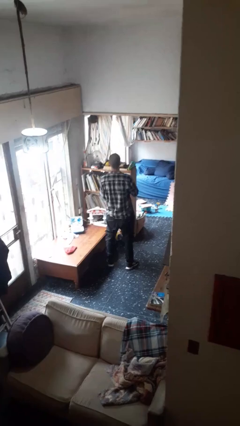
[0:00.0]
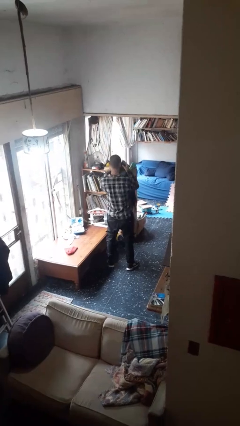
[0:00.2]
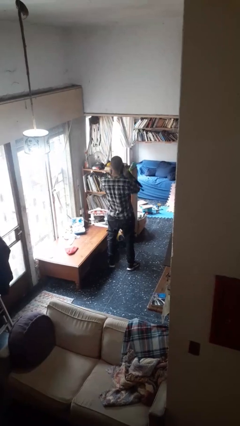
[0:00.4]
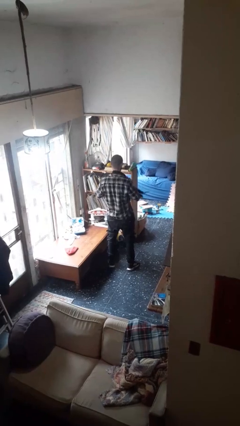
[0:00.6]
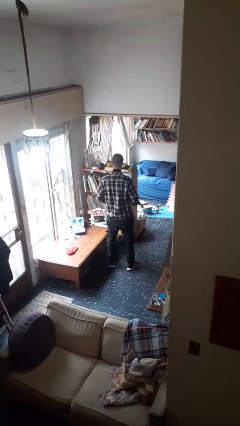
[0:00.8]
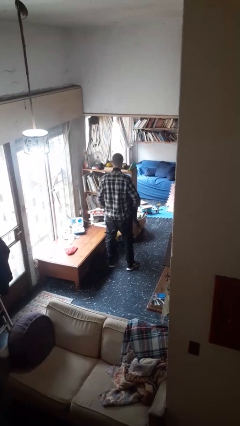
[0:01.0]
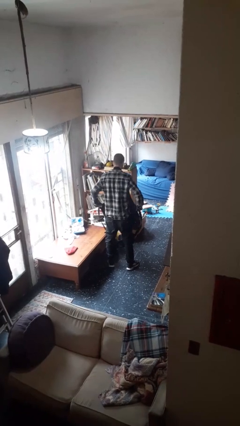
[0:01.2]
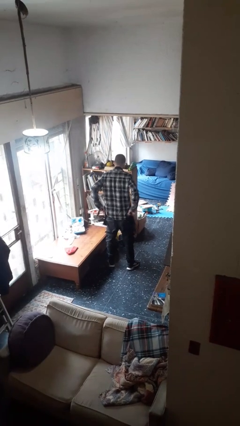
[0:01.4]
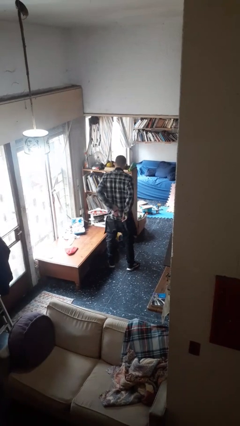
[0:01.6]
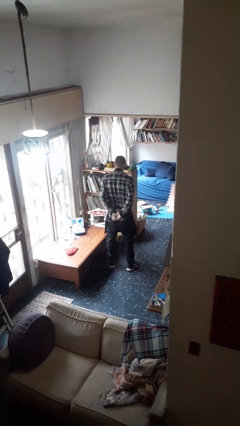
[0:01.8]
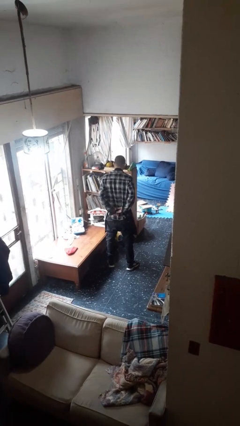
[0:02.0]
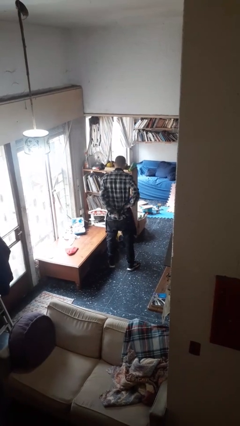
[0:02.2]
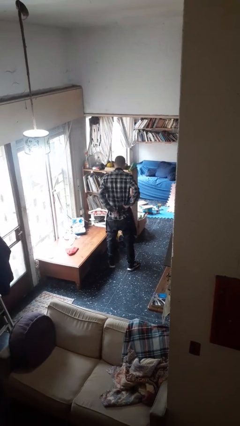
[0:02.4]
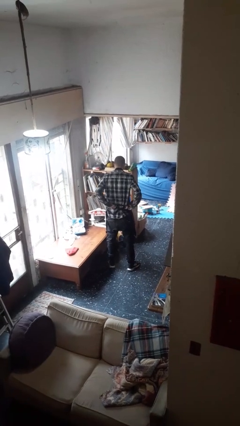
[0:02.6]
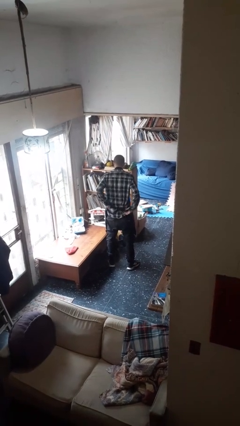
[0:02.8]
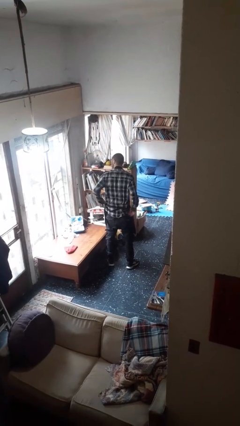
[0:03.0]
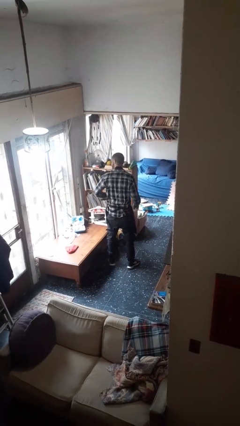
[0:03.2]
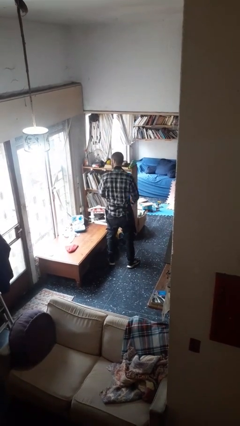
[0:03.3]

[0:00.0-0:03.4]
person puts on apron

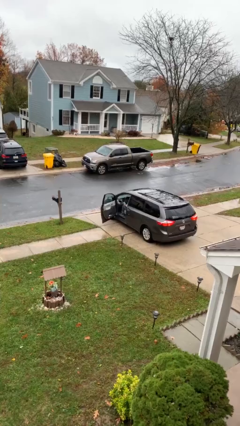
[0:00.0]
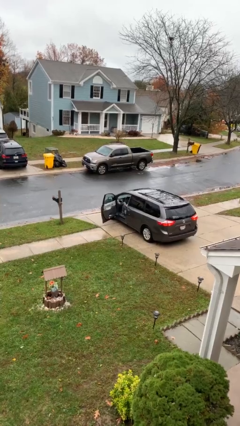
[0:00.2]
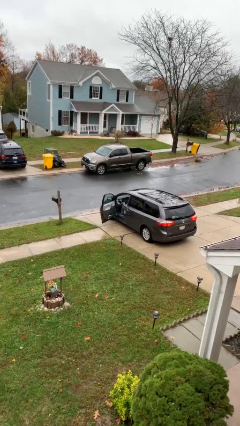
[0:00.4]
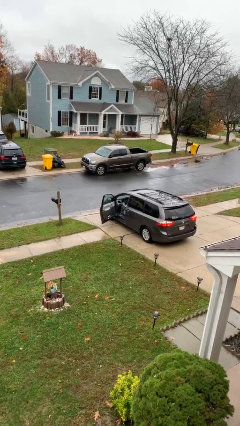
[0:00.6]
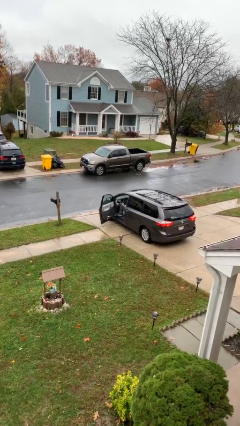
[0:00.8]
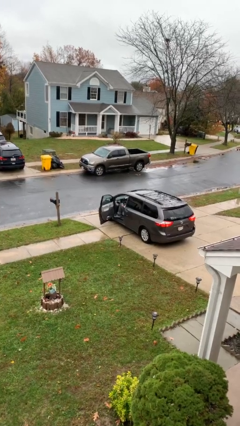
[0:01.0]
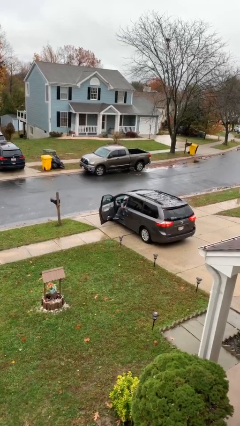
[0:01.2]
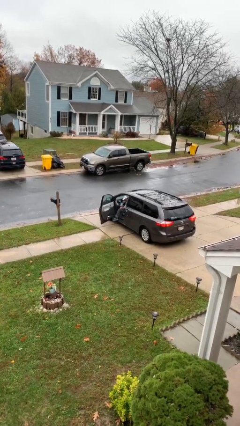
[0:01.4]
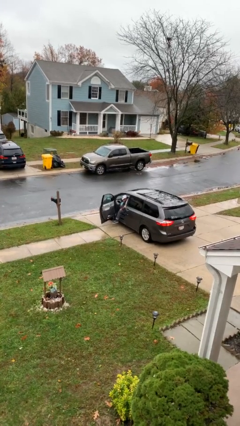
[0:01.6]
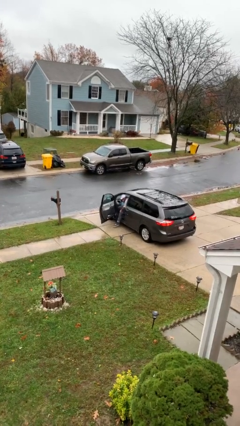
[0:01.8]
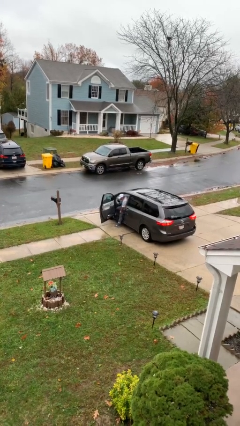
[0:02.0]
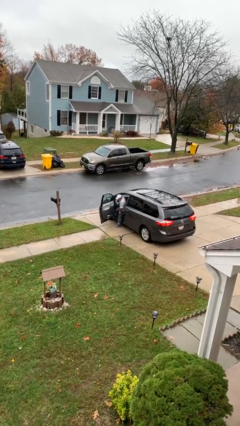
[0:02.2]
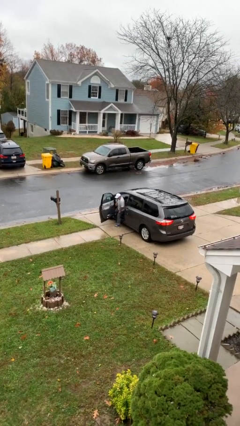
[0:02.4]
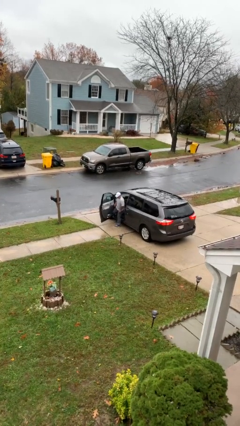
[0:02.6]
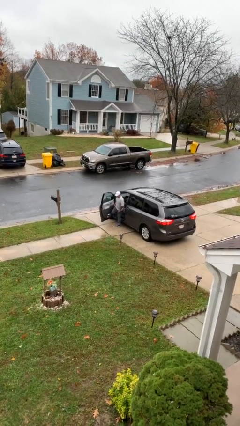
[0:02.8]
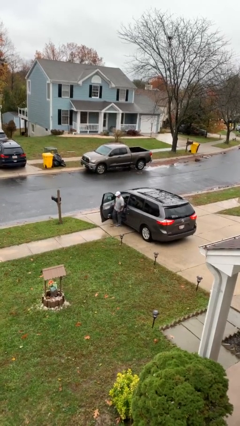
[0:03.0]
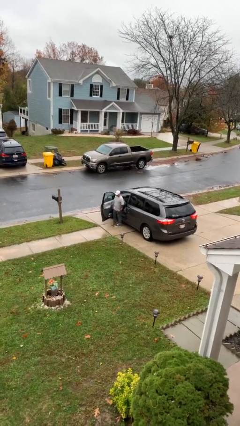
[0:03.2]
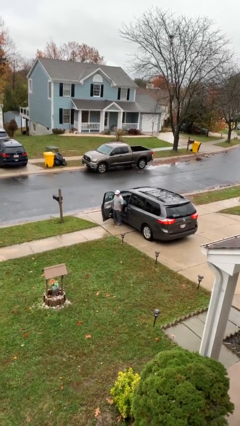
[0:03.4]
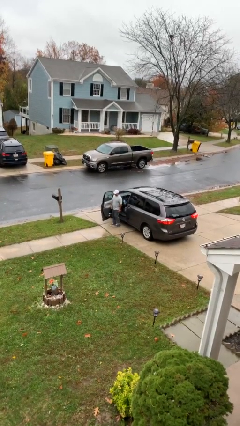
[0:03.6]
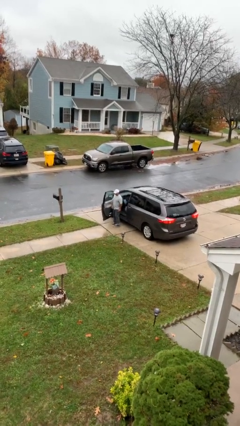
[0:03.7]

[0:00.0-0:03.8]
person exits car

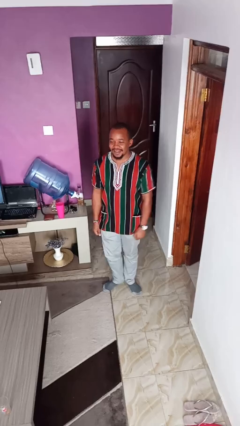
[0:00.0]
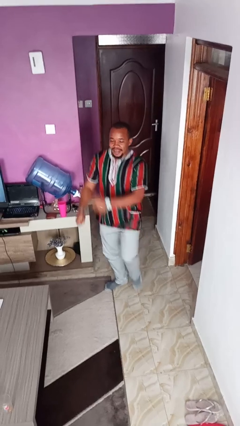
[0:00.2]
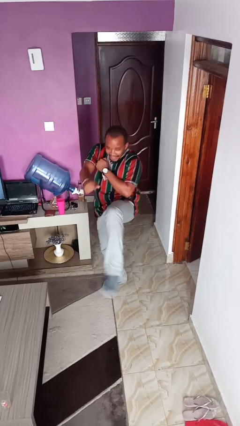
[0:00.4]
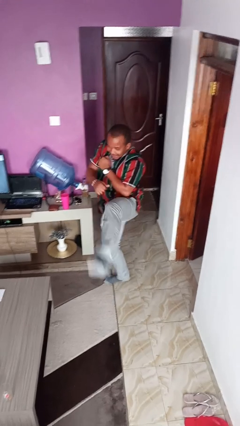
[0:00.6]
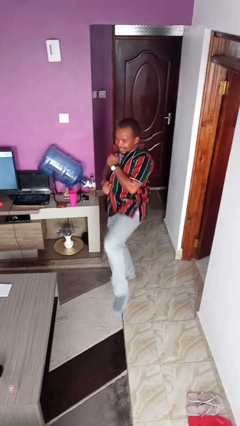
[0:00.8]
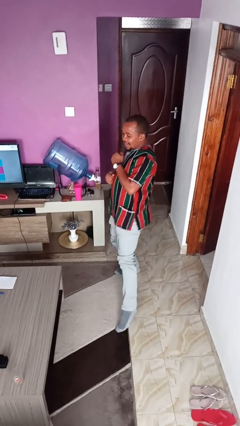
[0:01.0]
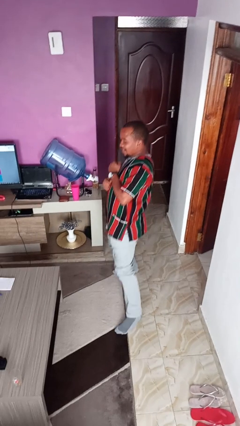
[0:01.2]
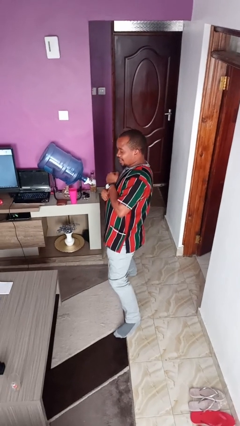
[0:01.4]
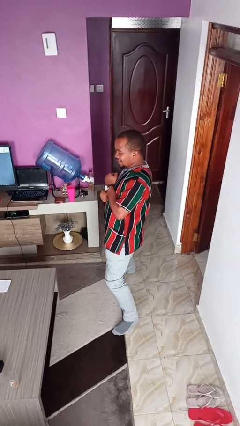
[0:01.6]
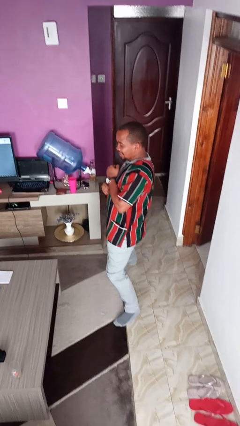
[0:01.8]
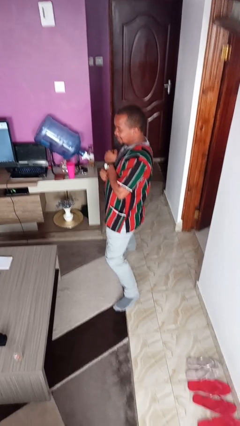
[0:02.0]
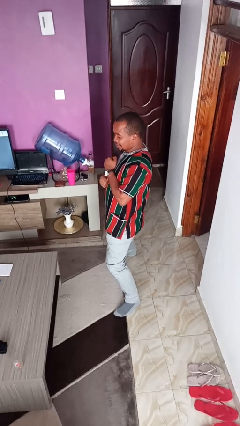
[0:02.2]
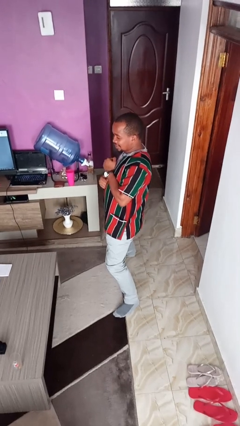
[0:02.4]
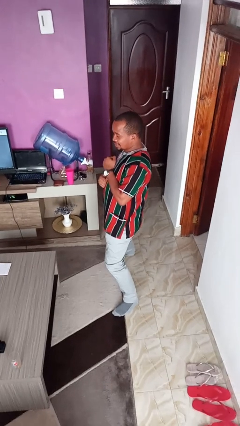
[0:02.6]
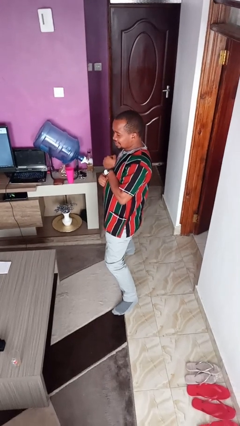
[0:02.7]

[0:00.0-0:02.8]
person karate kicks

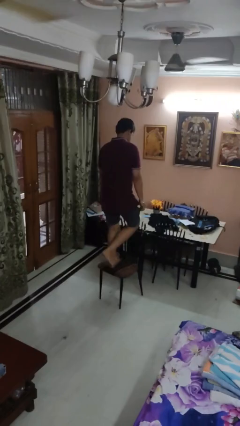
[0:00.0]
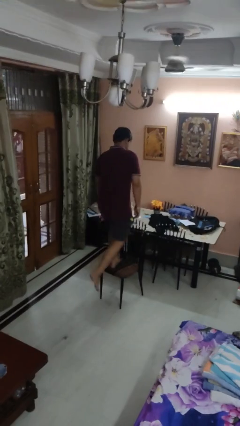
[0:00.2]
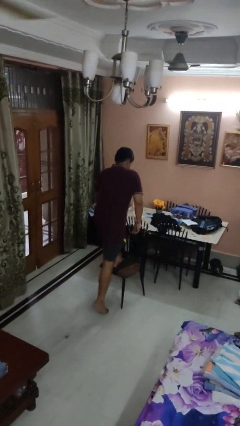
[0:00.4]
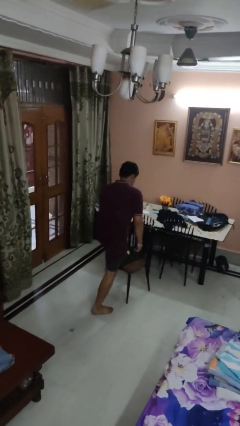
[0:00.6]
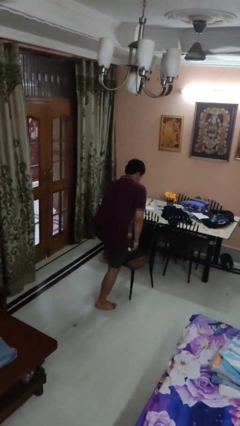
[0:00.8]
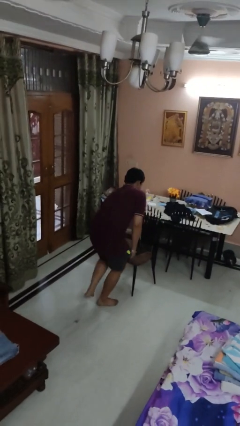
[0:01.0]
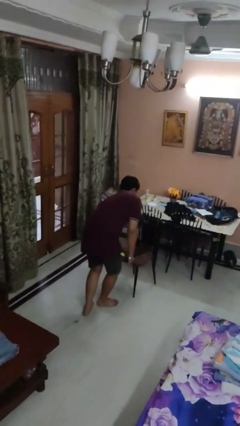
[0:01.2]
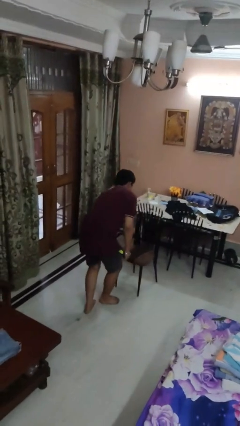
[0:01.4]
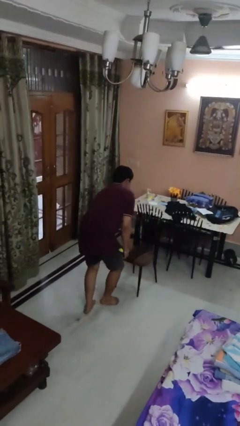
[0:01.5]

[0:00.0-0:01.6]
person climbs off chair

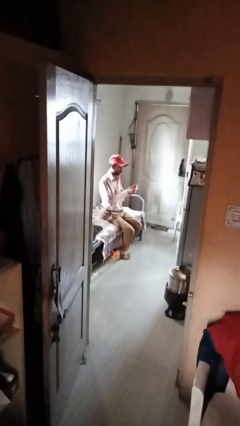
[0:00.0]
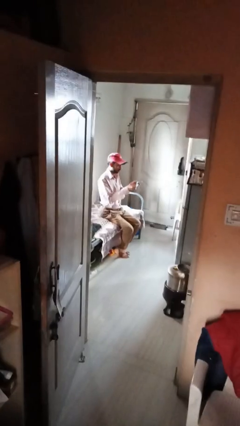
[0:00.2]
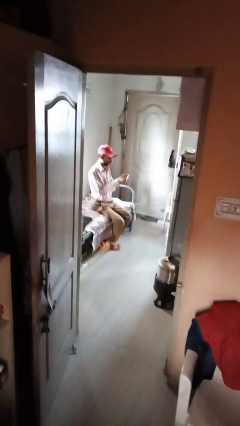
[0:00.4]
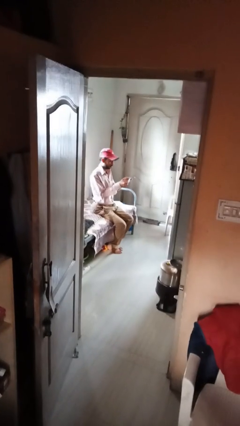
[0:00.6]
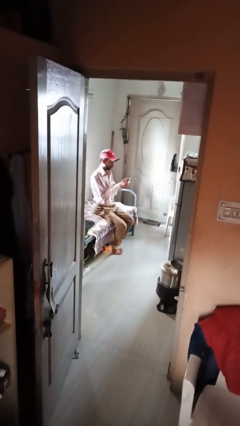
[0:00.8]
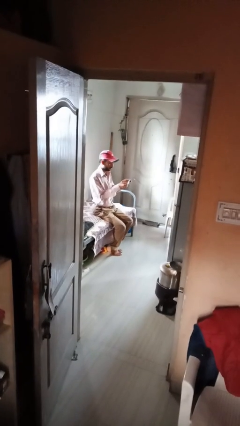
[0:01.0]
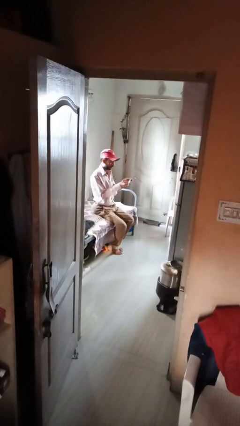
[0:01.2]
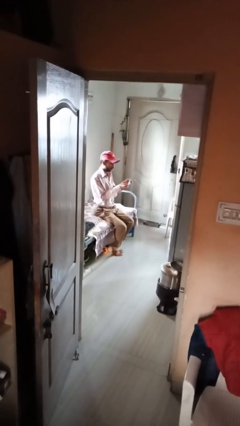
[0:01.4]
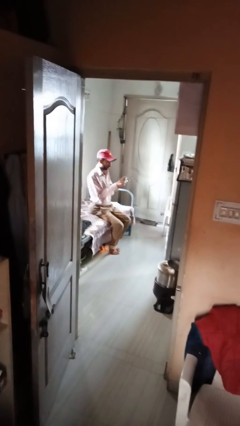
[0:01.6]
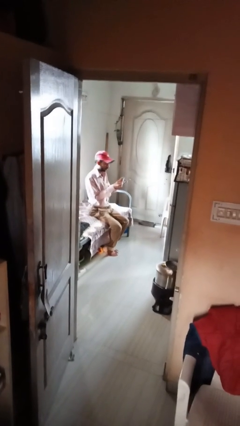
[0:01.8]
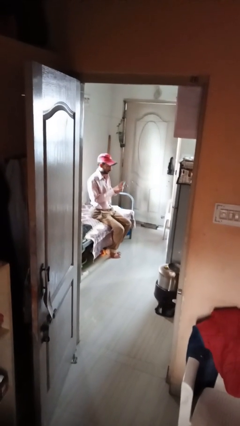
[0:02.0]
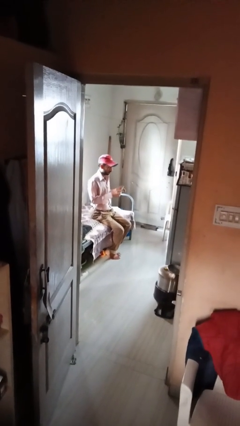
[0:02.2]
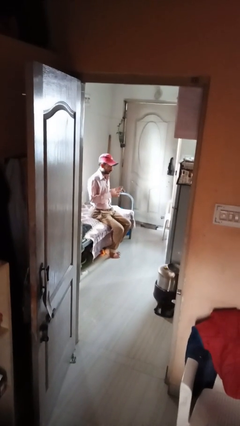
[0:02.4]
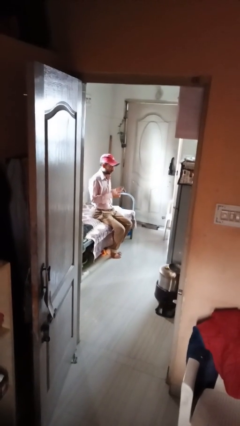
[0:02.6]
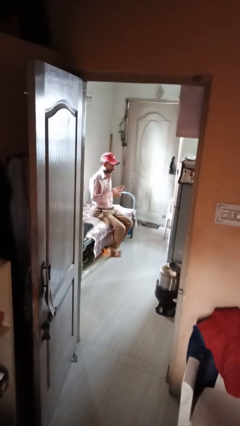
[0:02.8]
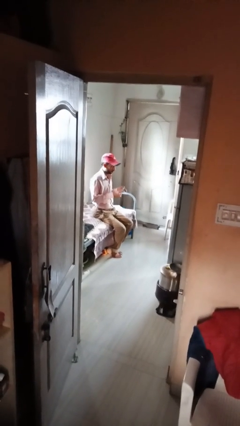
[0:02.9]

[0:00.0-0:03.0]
person clips fingernails

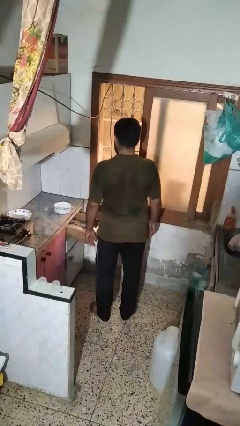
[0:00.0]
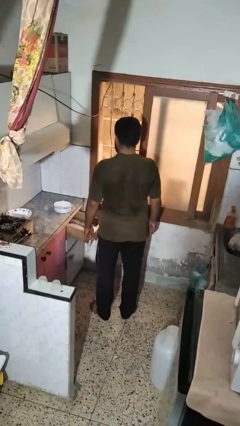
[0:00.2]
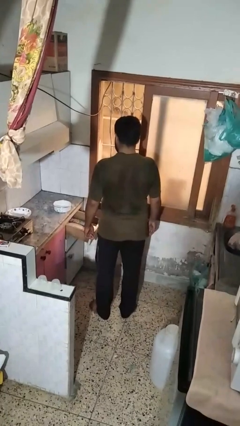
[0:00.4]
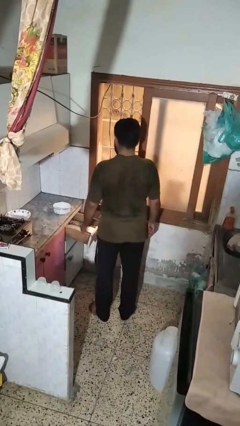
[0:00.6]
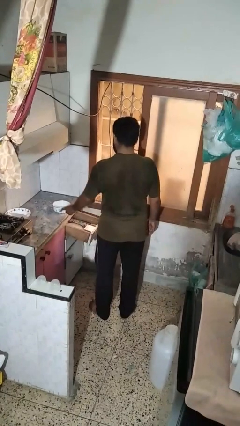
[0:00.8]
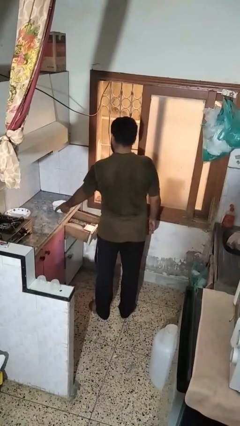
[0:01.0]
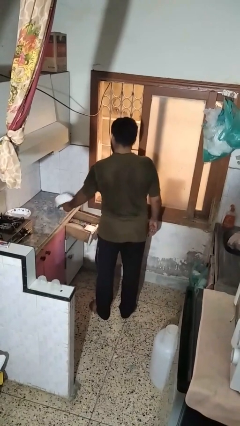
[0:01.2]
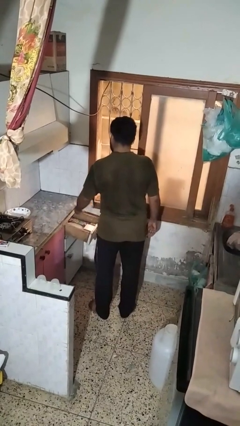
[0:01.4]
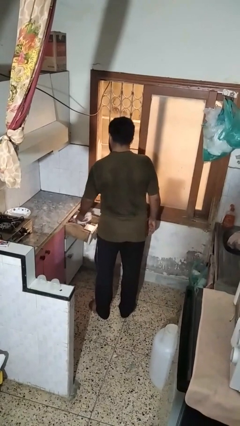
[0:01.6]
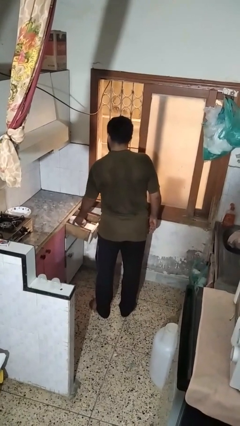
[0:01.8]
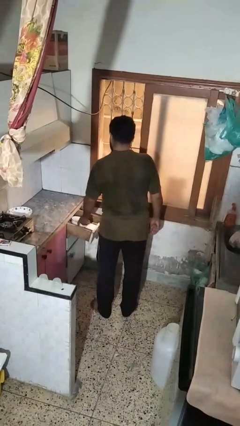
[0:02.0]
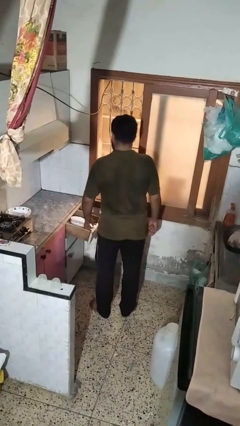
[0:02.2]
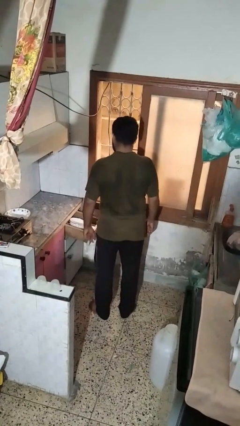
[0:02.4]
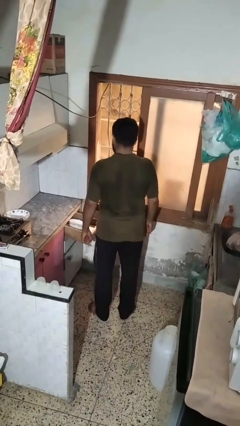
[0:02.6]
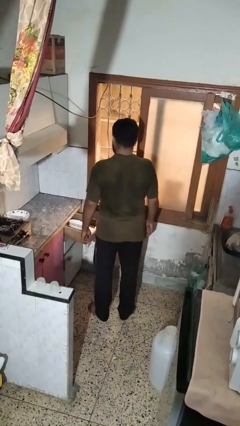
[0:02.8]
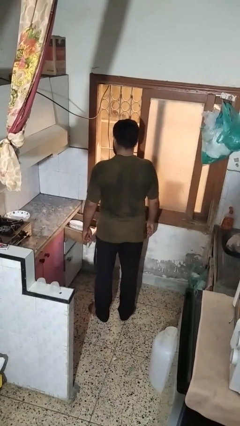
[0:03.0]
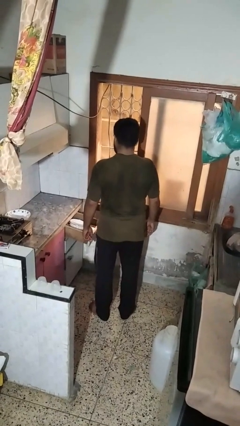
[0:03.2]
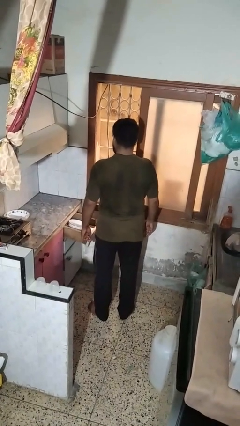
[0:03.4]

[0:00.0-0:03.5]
person puts object into kitchen drawer
